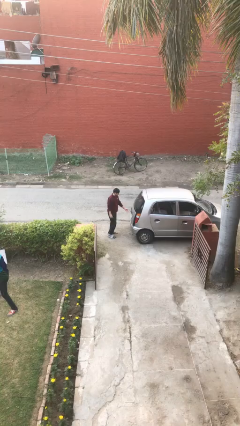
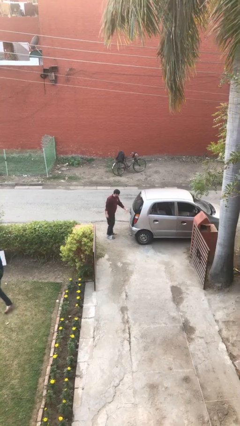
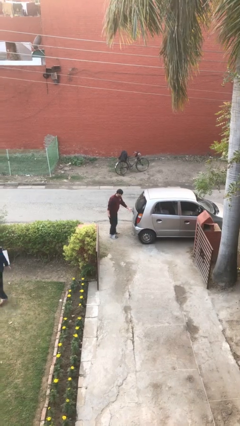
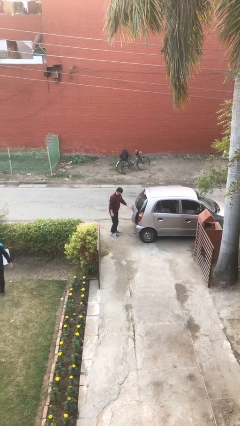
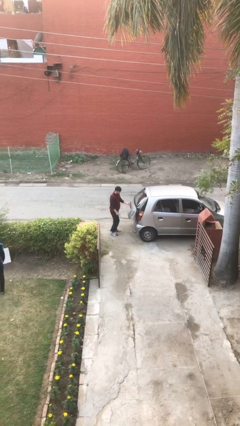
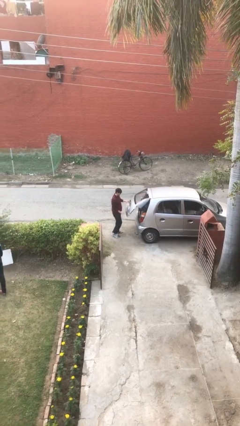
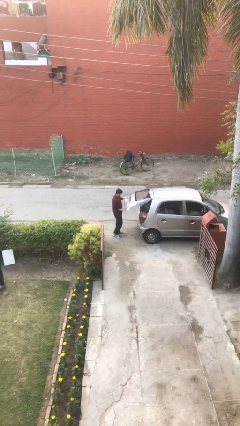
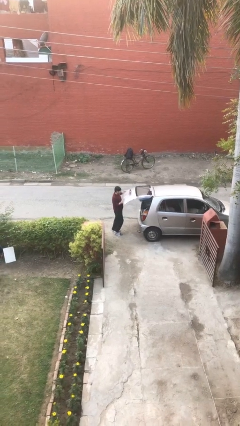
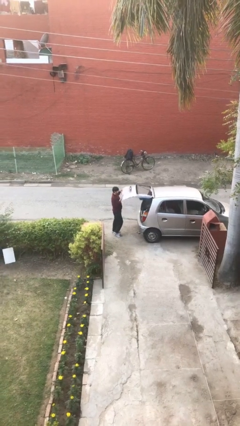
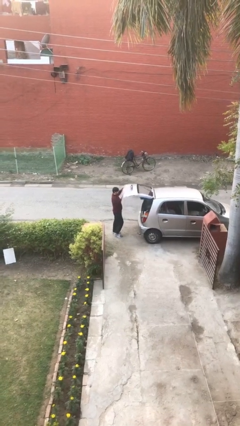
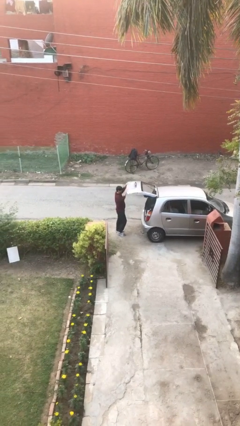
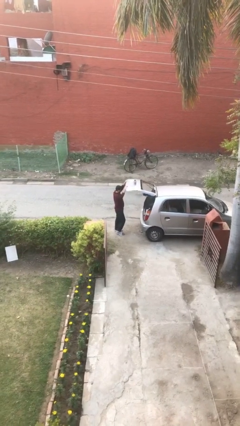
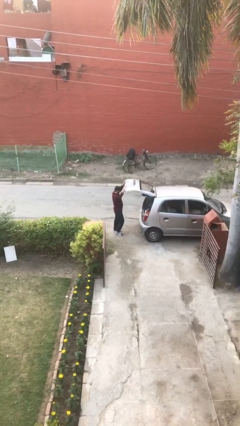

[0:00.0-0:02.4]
person opens car trunk

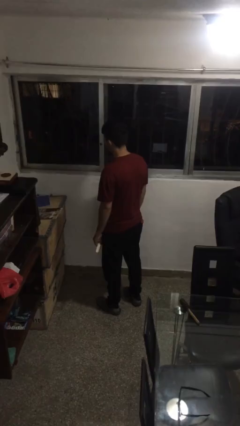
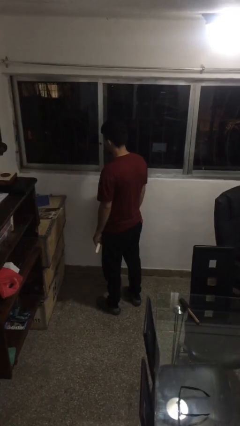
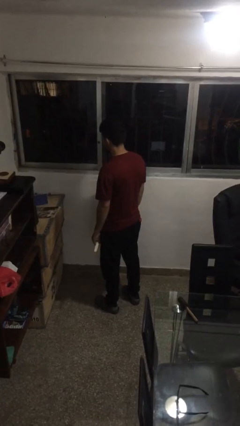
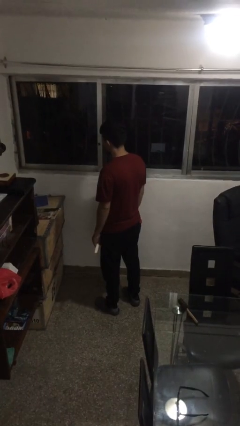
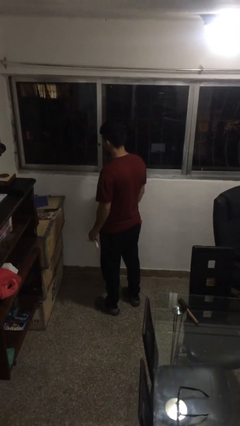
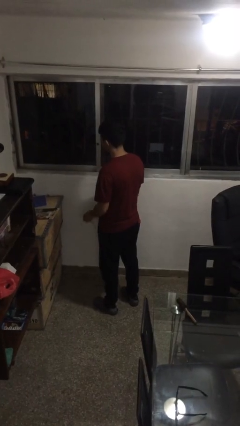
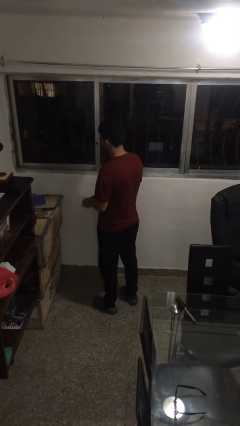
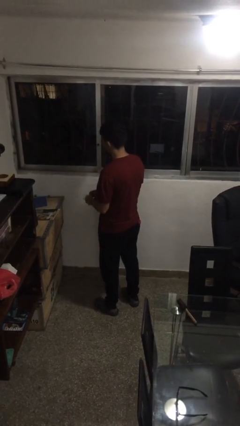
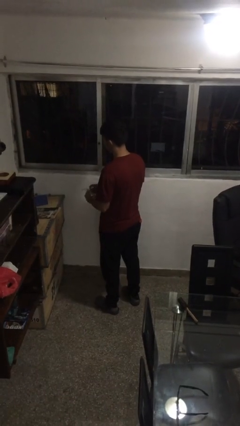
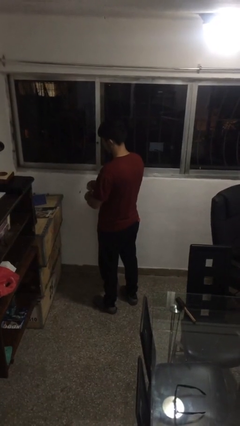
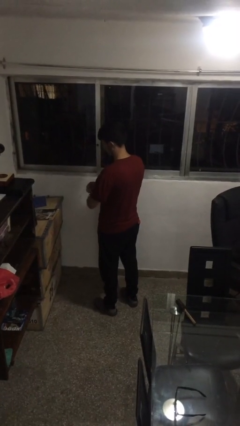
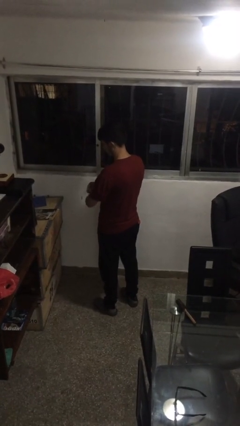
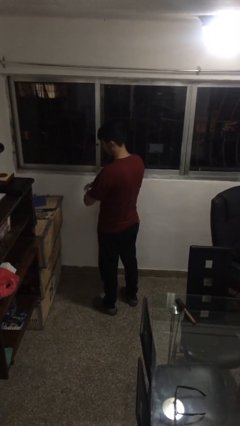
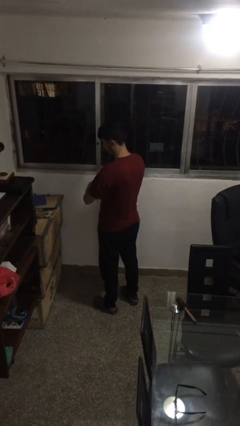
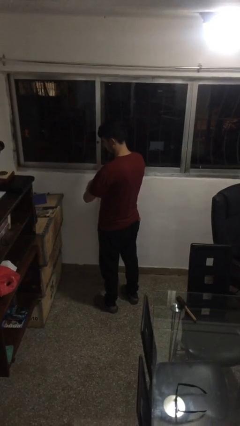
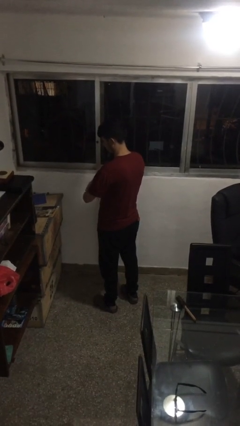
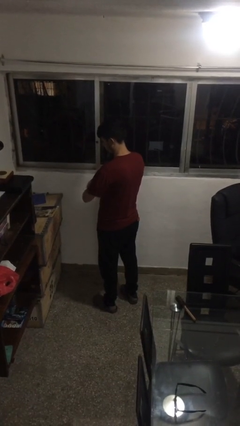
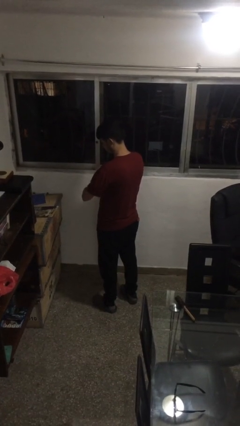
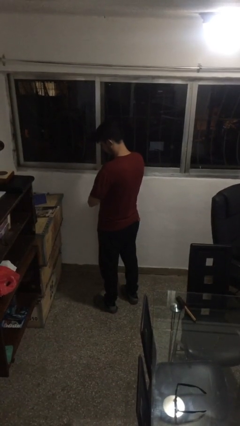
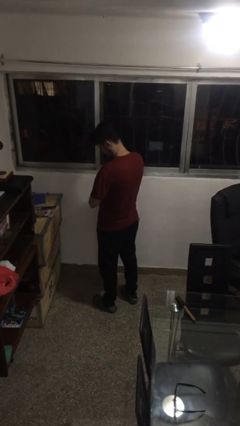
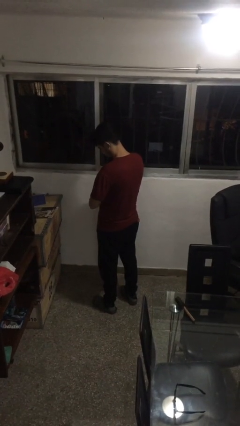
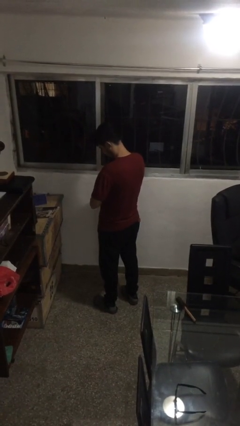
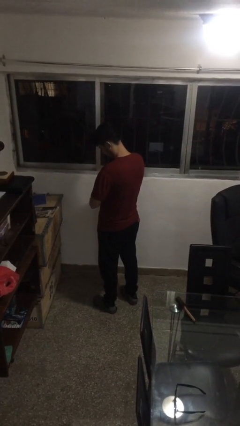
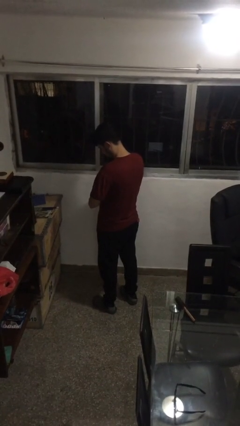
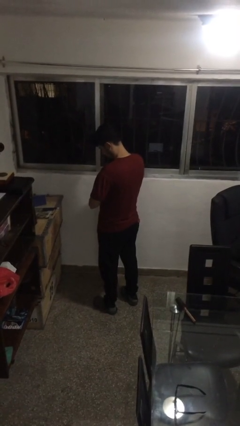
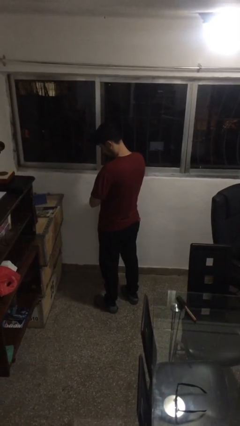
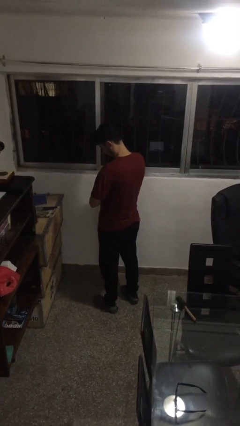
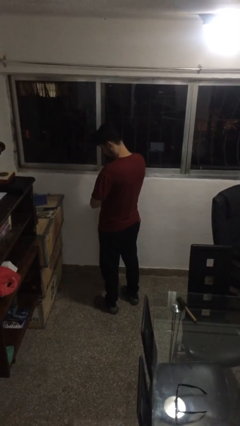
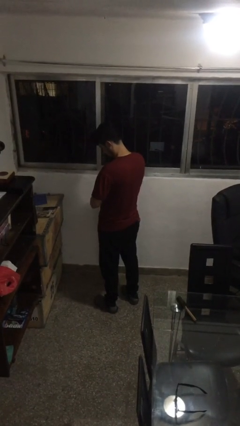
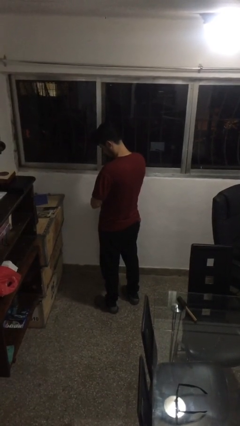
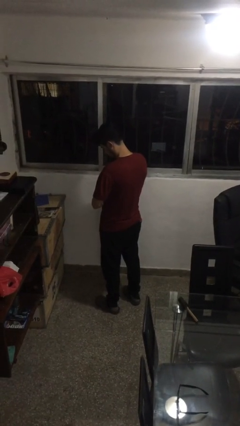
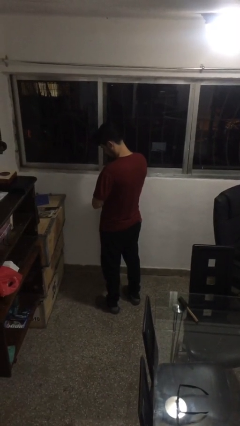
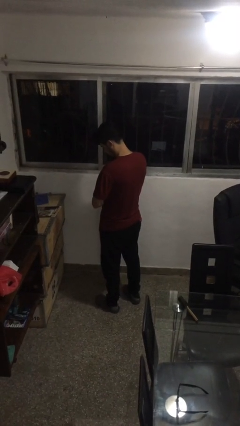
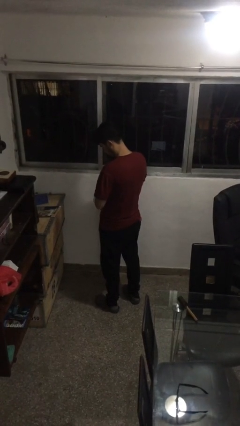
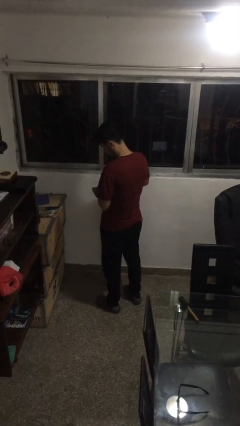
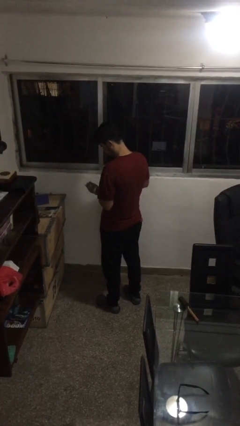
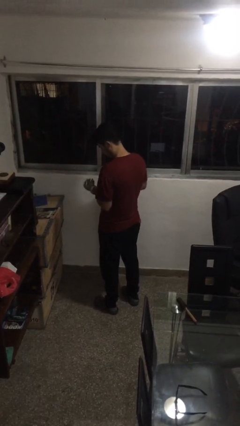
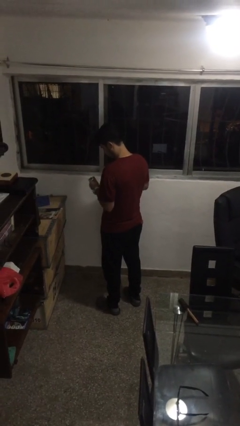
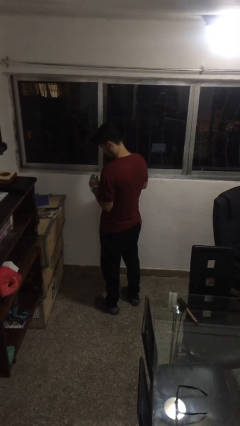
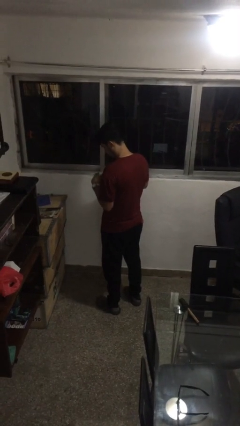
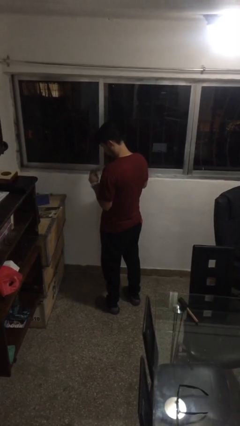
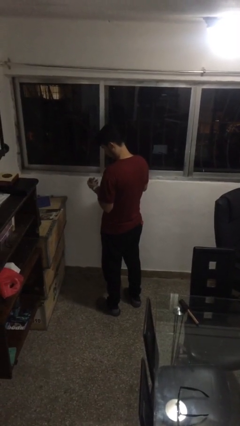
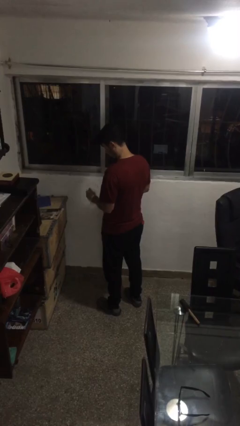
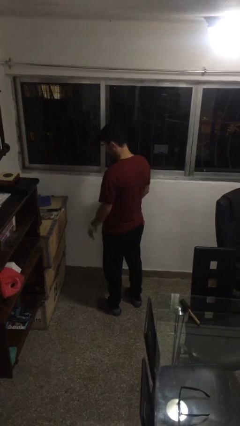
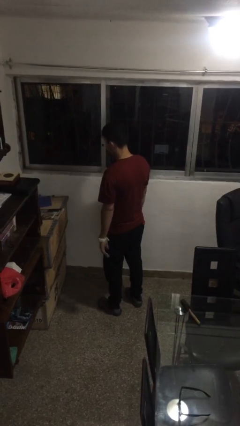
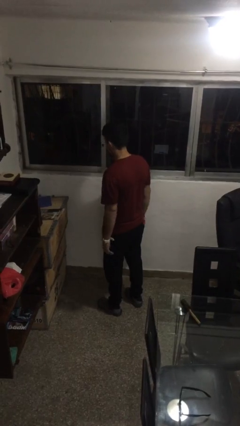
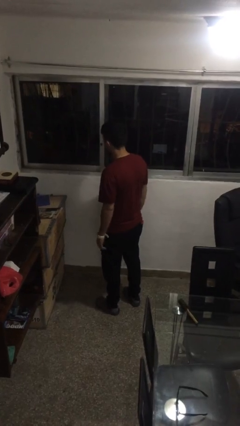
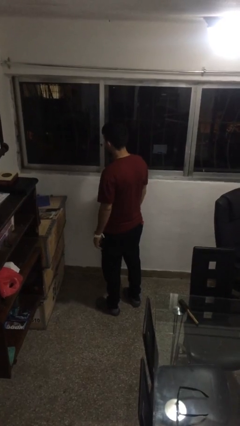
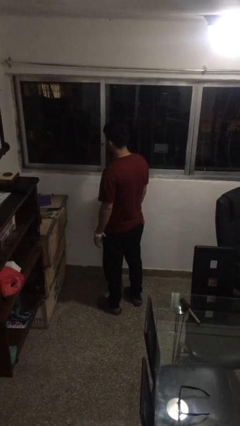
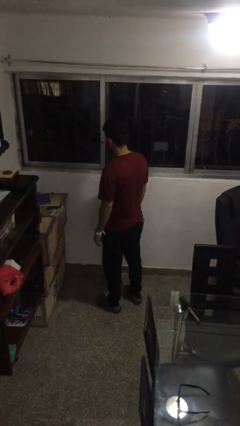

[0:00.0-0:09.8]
person puts on wristwatch

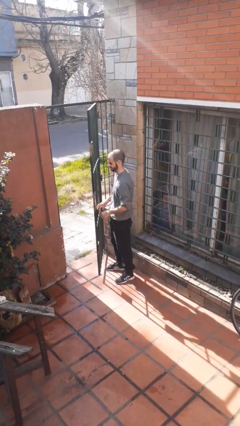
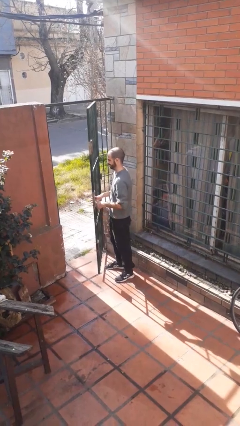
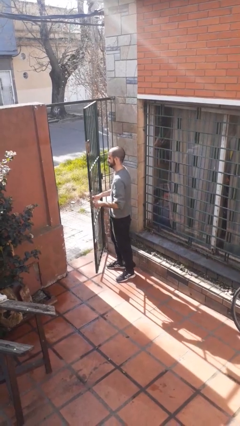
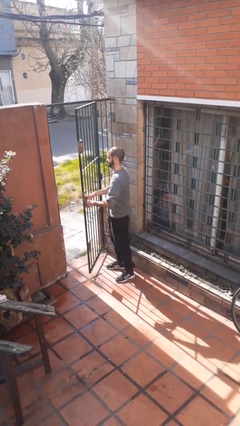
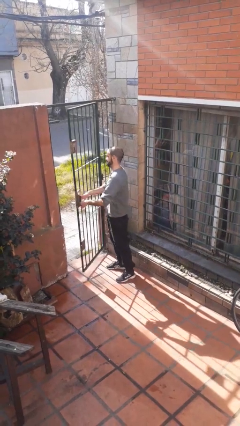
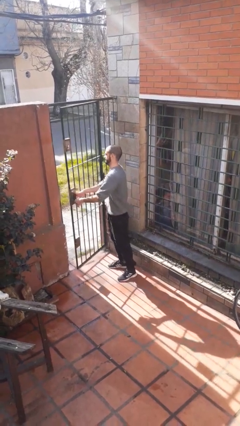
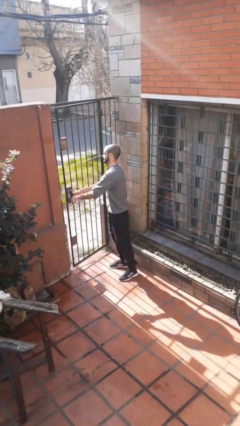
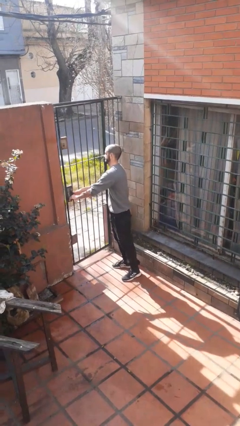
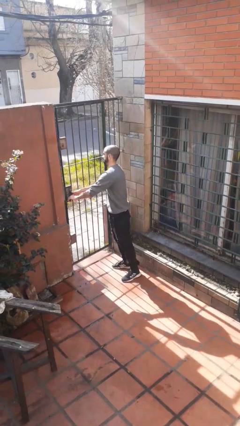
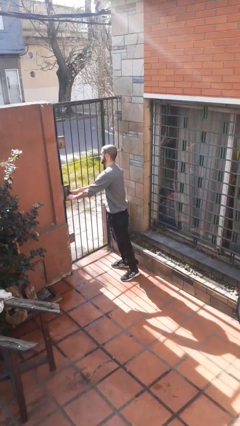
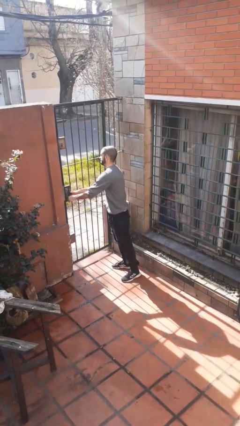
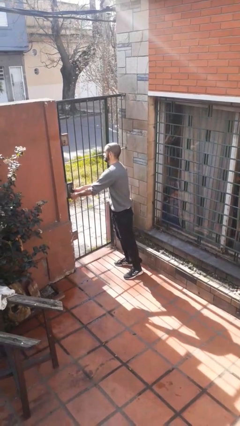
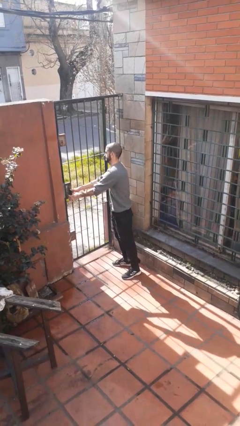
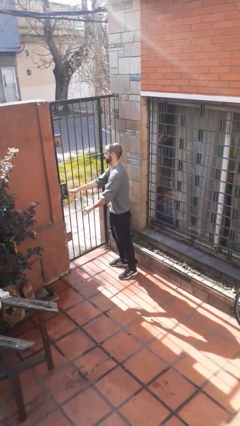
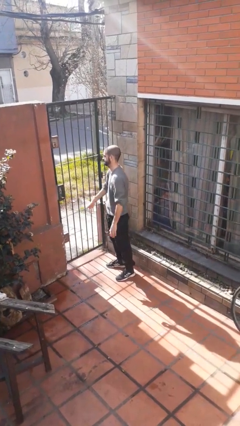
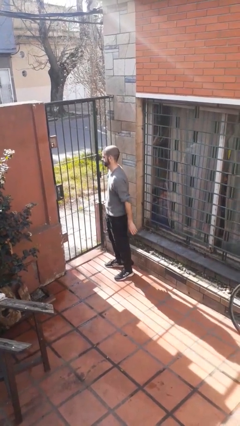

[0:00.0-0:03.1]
person closes gate

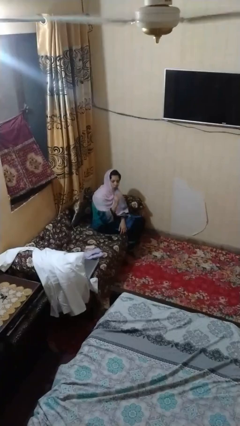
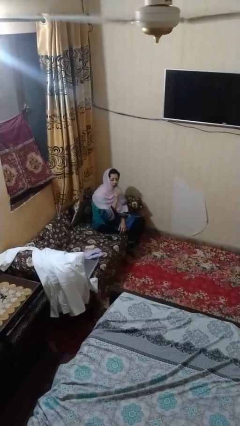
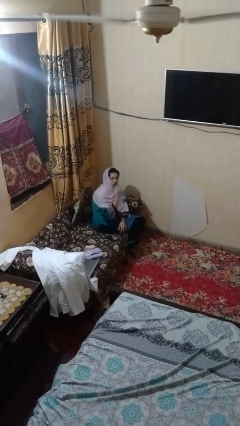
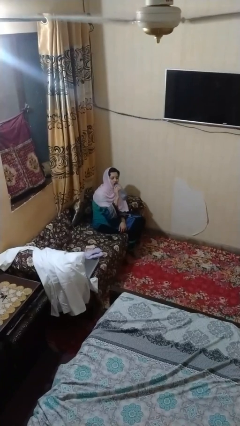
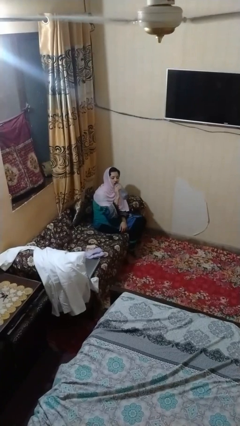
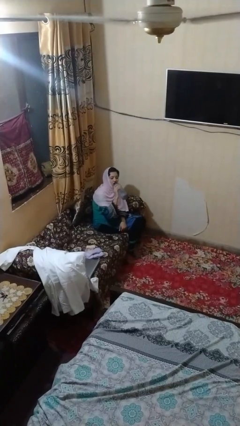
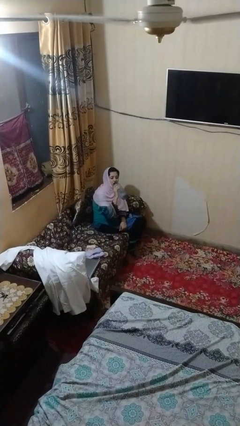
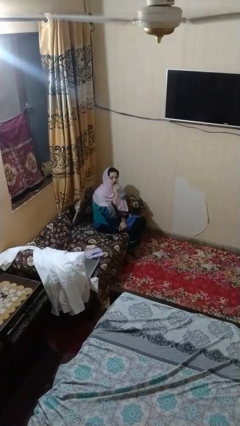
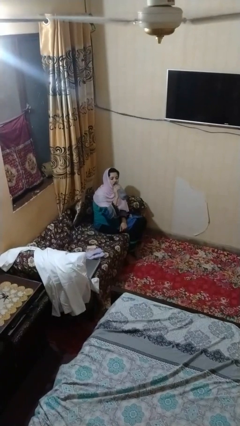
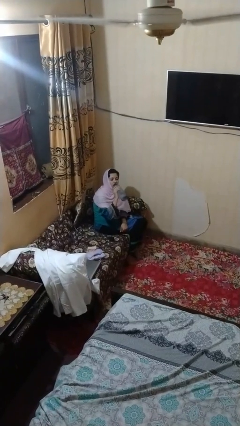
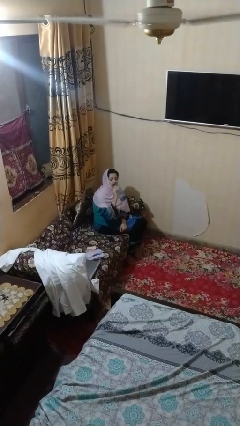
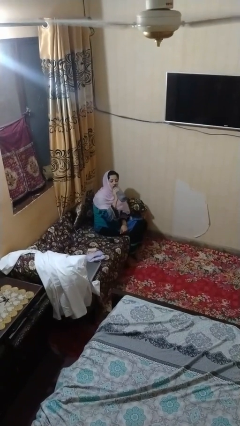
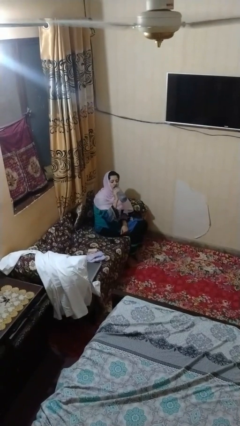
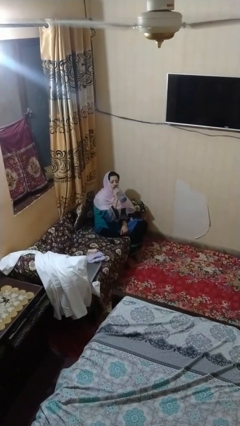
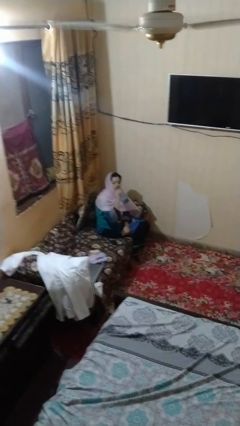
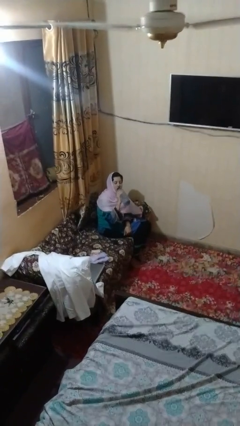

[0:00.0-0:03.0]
person drinks from bottle
